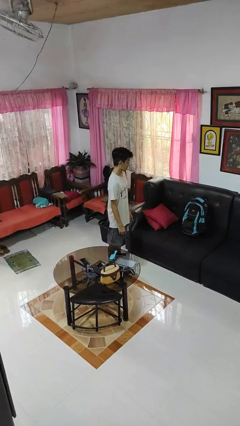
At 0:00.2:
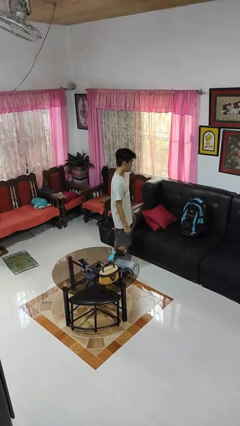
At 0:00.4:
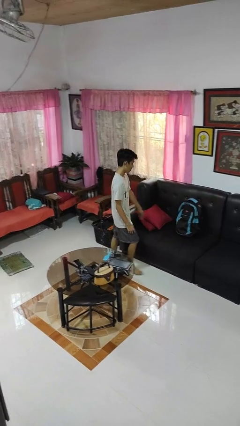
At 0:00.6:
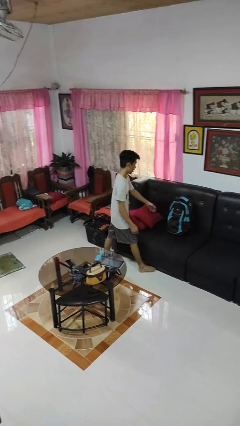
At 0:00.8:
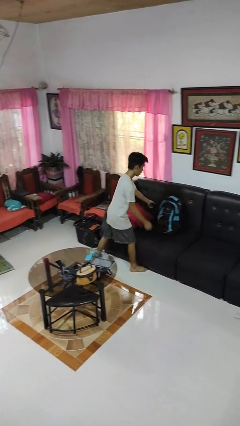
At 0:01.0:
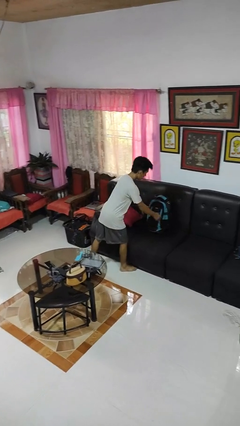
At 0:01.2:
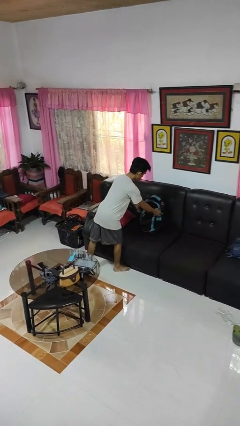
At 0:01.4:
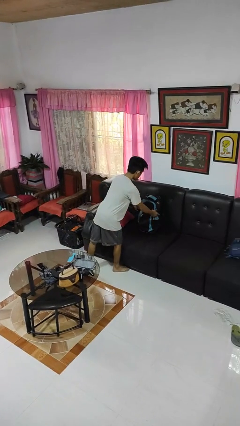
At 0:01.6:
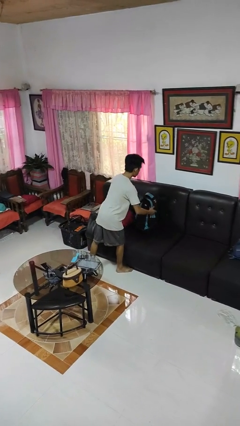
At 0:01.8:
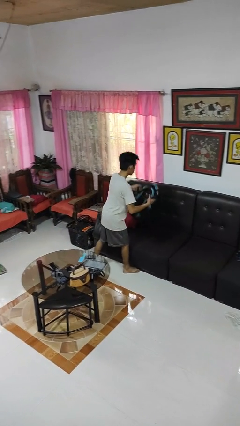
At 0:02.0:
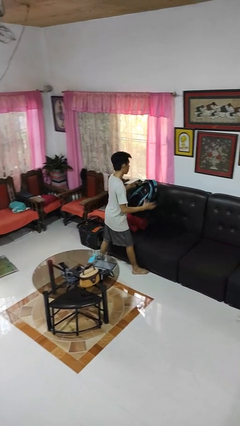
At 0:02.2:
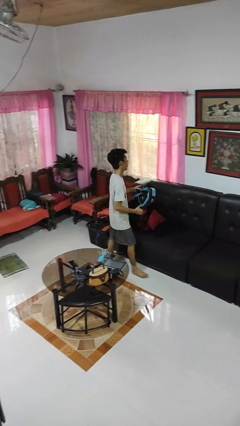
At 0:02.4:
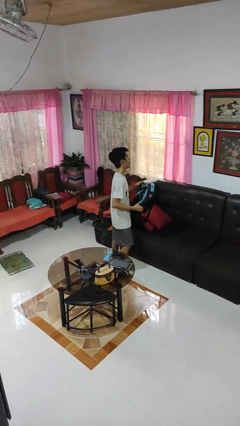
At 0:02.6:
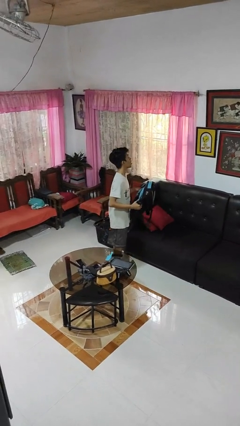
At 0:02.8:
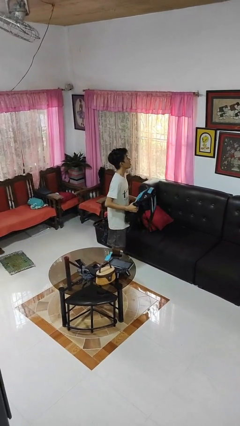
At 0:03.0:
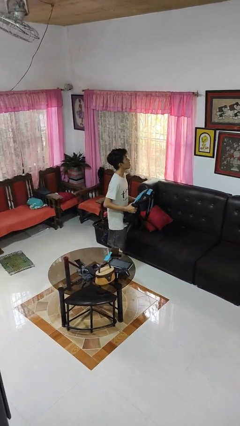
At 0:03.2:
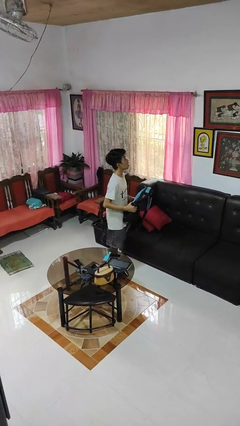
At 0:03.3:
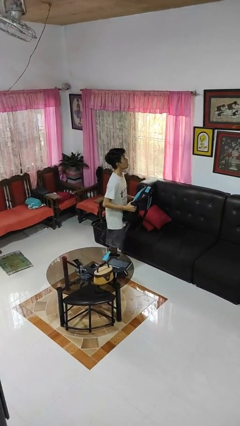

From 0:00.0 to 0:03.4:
person picks up object from couch

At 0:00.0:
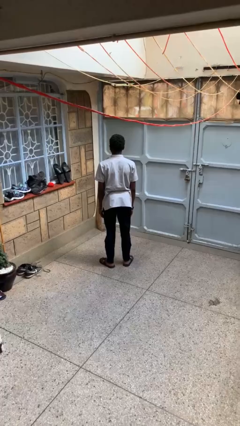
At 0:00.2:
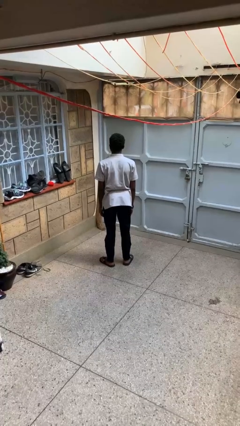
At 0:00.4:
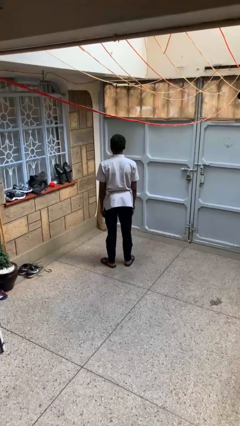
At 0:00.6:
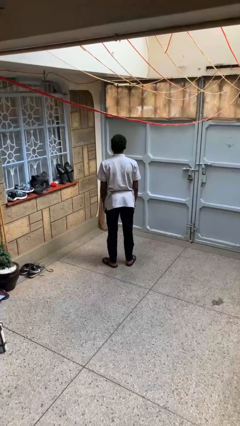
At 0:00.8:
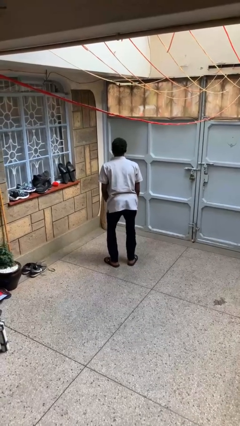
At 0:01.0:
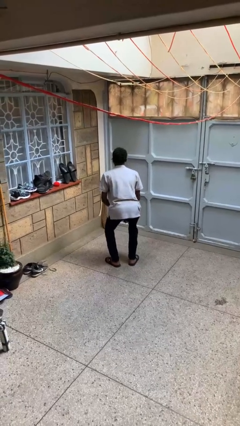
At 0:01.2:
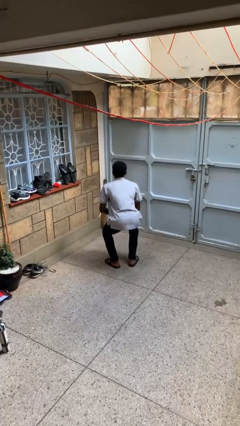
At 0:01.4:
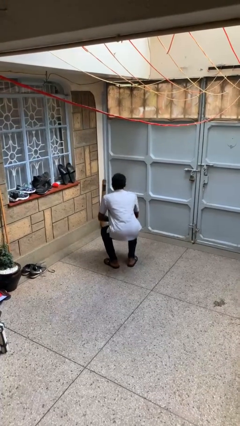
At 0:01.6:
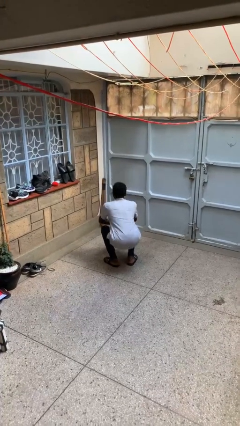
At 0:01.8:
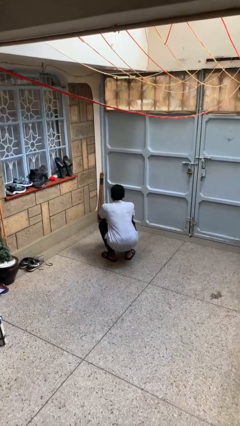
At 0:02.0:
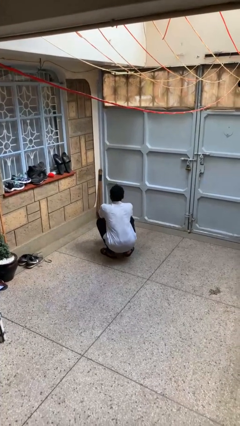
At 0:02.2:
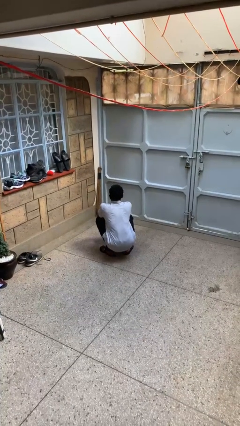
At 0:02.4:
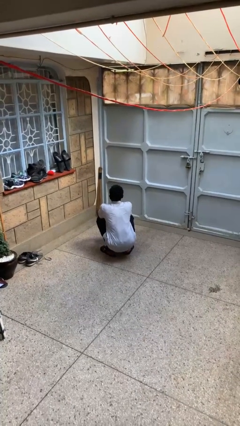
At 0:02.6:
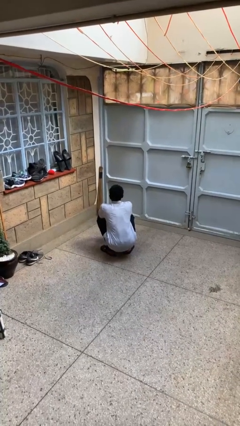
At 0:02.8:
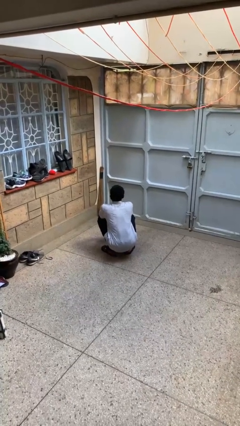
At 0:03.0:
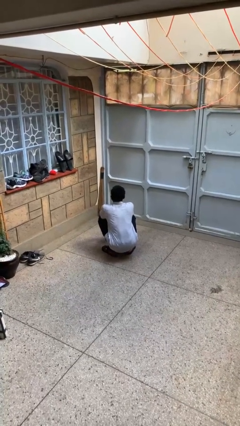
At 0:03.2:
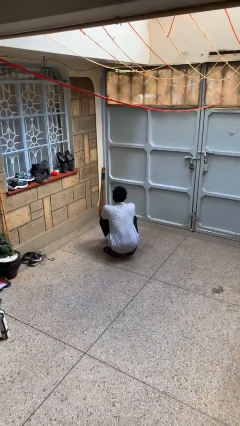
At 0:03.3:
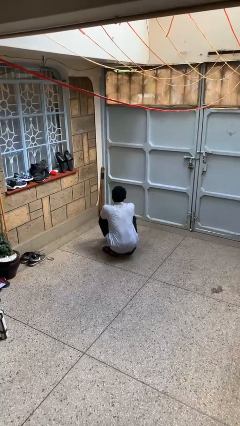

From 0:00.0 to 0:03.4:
person squats

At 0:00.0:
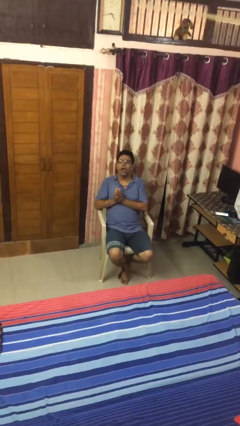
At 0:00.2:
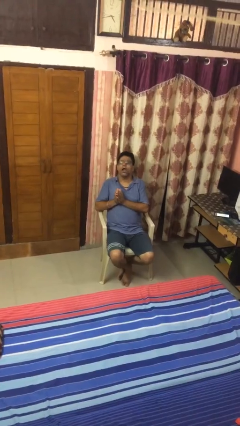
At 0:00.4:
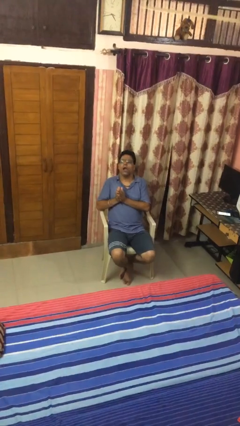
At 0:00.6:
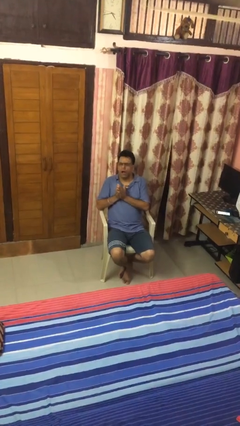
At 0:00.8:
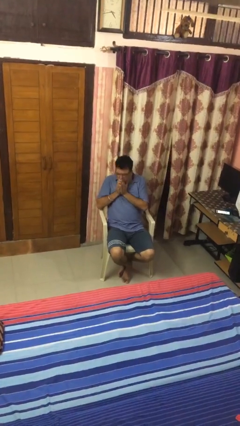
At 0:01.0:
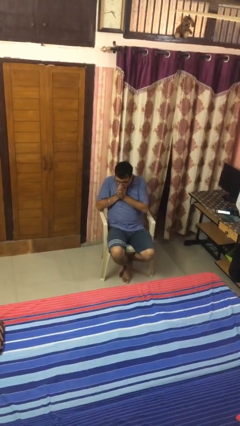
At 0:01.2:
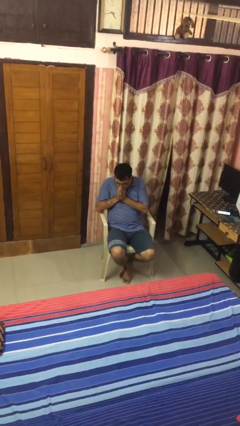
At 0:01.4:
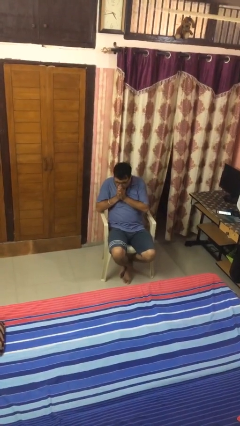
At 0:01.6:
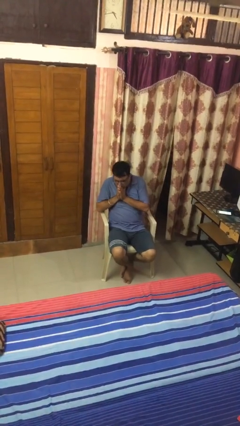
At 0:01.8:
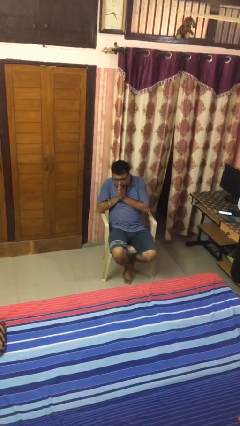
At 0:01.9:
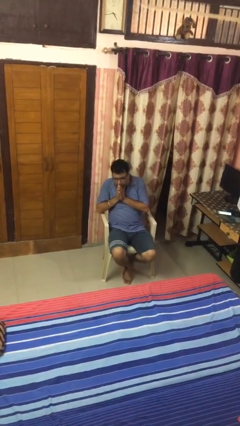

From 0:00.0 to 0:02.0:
person sneezes into hand

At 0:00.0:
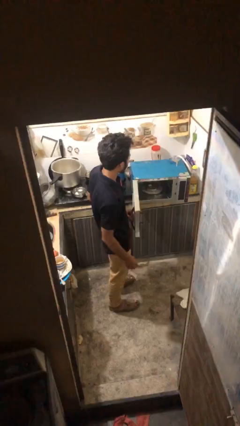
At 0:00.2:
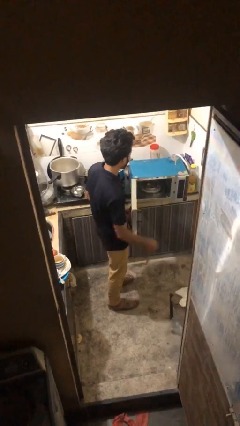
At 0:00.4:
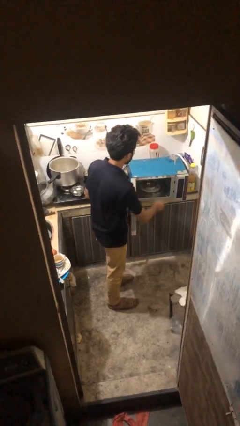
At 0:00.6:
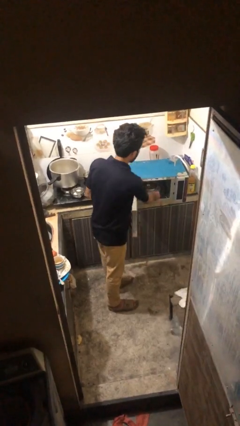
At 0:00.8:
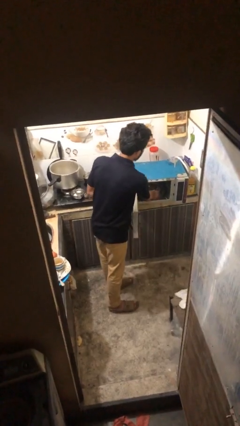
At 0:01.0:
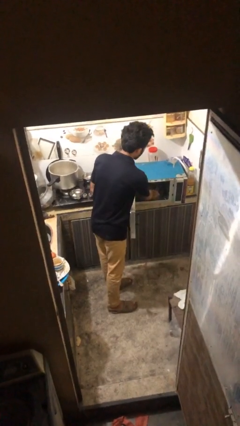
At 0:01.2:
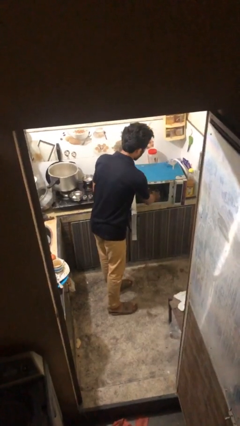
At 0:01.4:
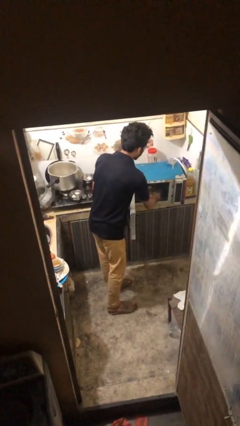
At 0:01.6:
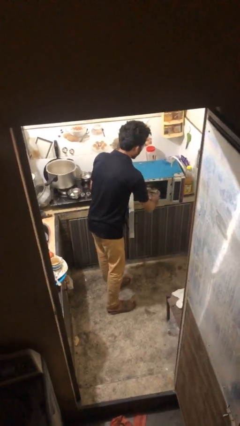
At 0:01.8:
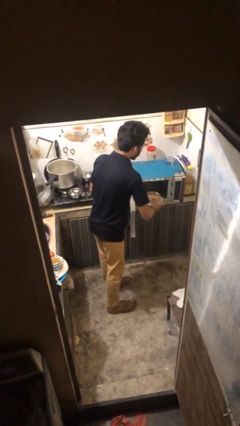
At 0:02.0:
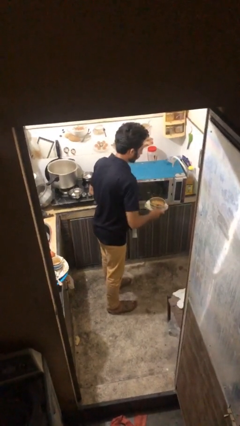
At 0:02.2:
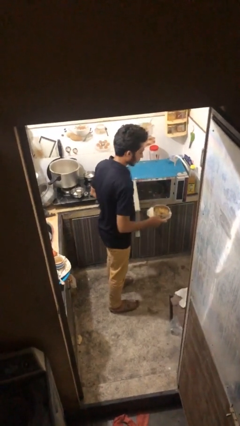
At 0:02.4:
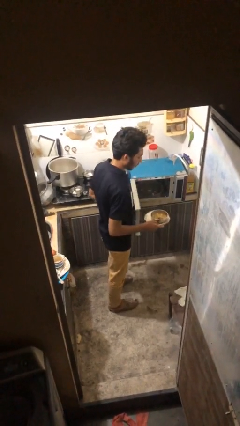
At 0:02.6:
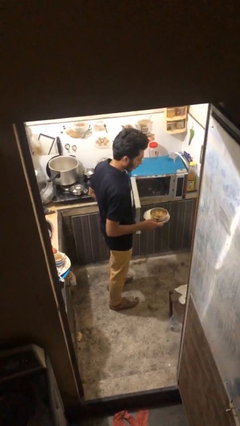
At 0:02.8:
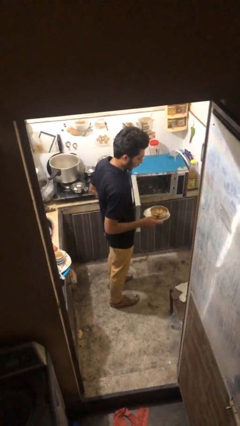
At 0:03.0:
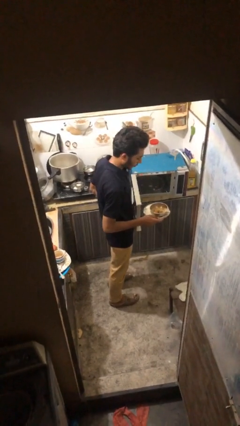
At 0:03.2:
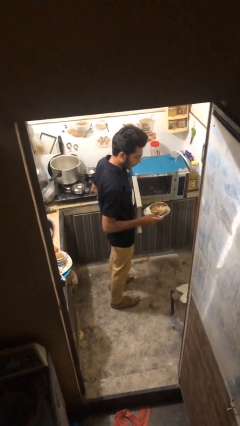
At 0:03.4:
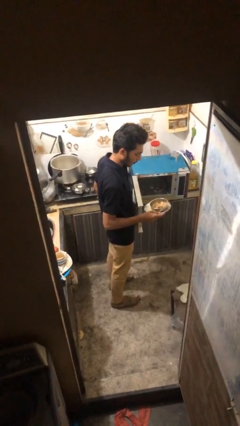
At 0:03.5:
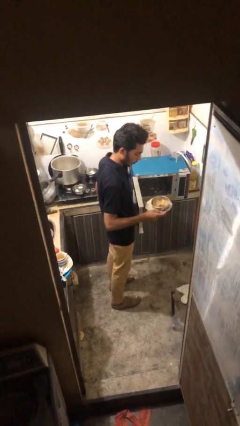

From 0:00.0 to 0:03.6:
person takes object from microwave

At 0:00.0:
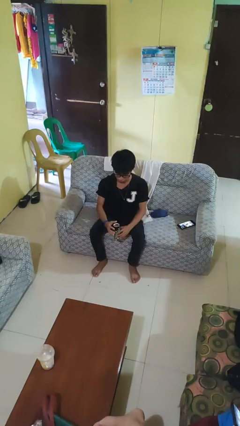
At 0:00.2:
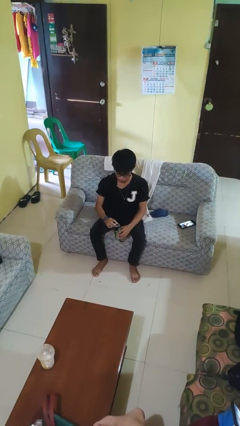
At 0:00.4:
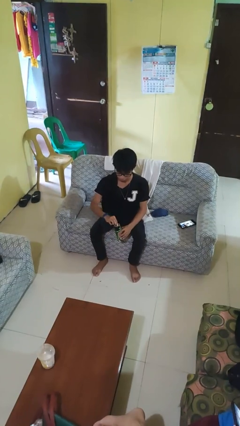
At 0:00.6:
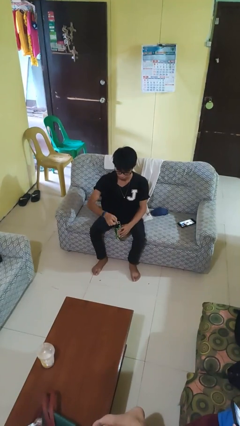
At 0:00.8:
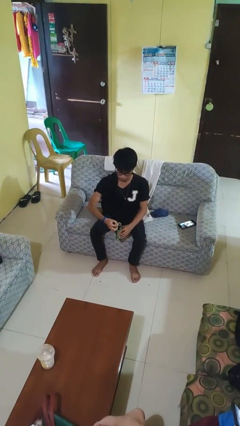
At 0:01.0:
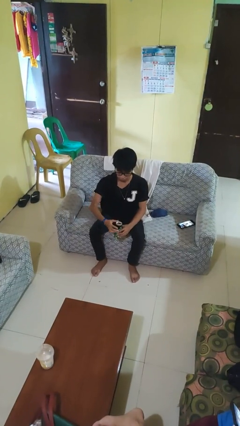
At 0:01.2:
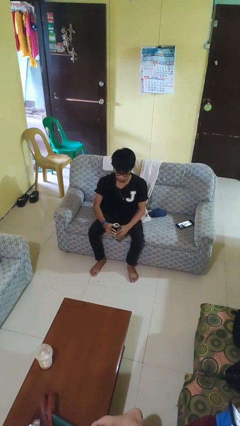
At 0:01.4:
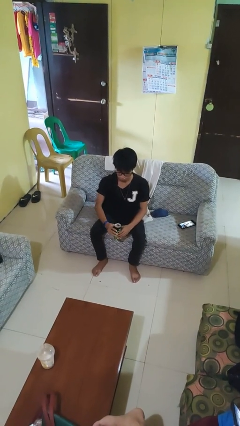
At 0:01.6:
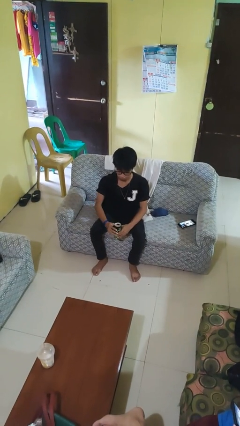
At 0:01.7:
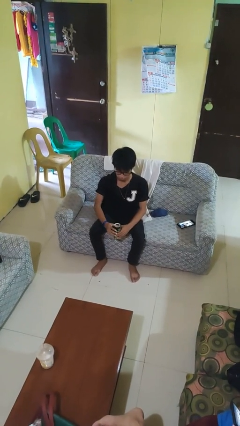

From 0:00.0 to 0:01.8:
person opens beverage can

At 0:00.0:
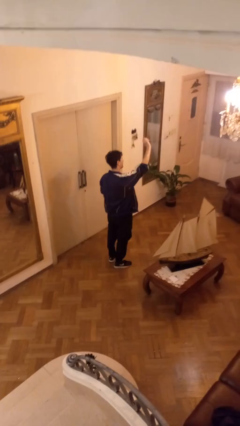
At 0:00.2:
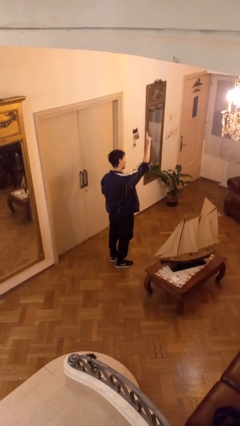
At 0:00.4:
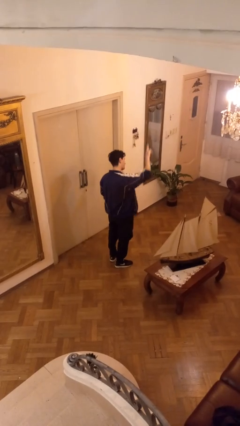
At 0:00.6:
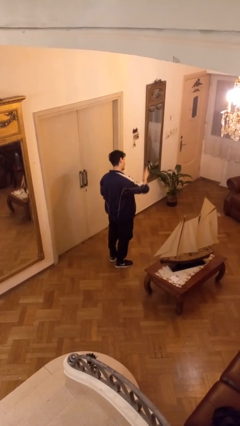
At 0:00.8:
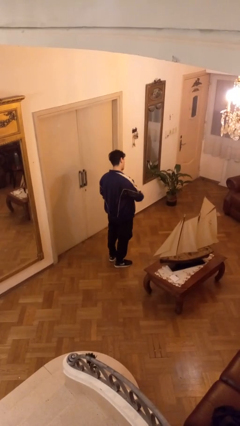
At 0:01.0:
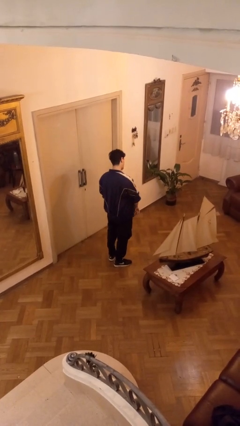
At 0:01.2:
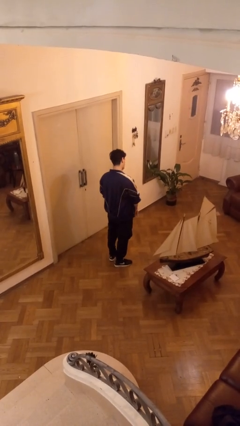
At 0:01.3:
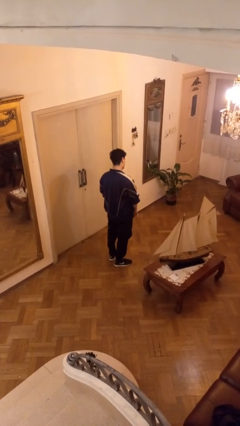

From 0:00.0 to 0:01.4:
person gestures swipe down

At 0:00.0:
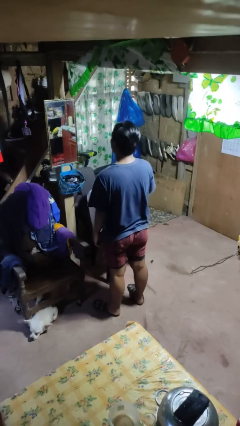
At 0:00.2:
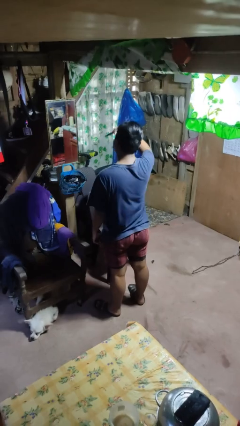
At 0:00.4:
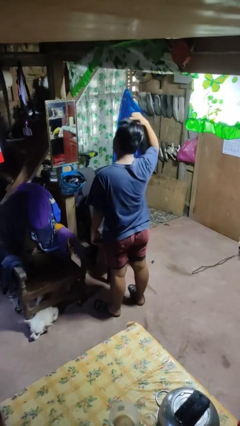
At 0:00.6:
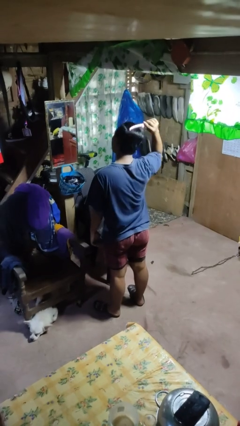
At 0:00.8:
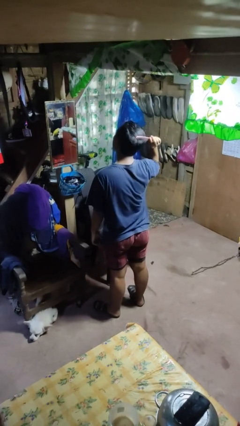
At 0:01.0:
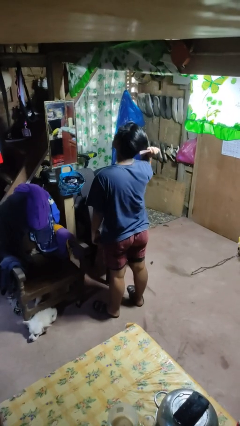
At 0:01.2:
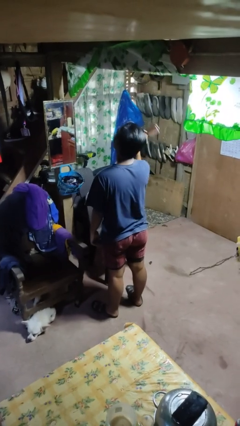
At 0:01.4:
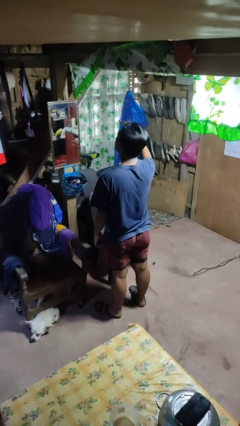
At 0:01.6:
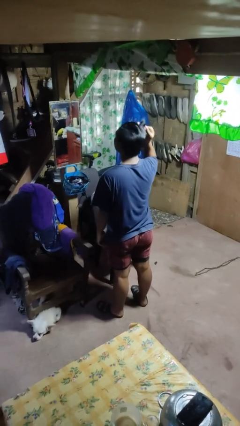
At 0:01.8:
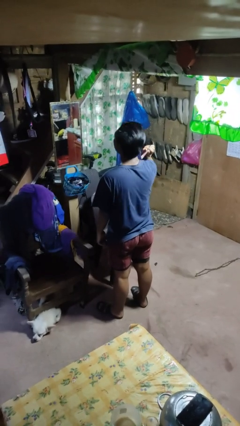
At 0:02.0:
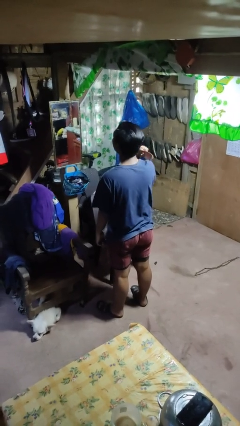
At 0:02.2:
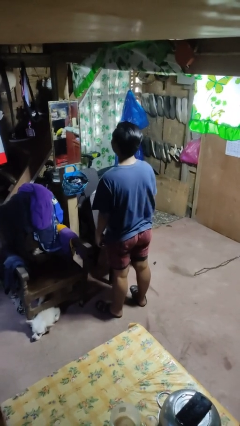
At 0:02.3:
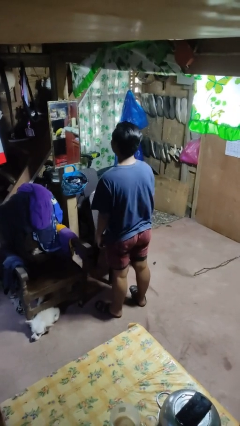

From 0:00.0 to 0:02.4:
person brushes hair
